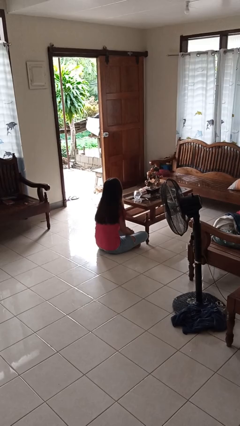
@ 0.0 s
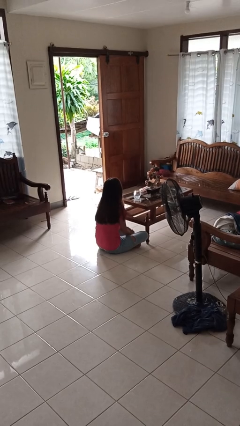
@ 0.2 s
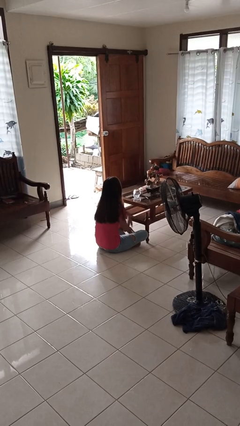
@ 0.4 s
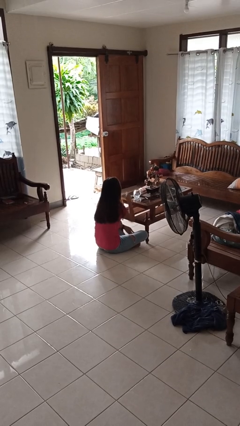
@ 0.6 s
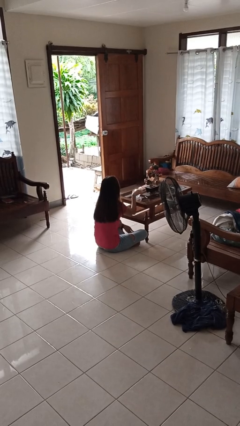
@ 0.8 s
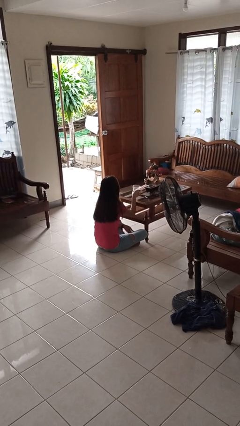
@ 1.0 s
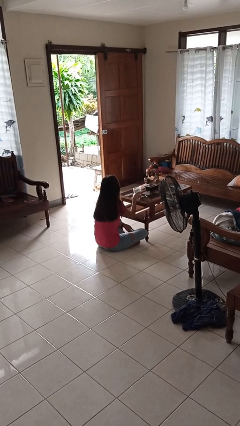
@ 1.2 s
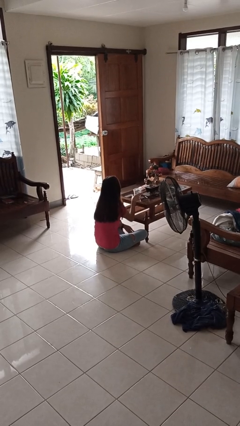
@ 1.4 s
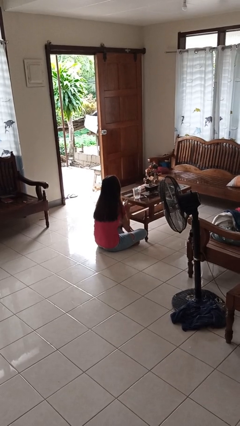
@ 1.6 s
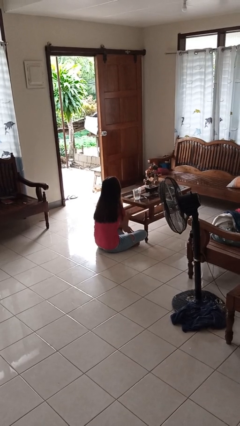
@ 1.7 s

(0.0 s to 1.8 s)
person sets upright glass

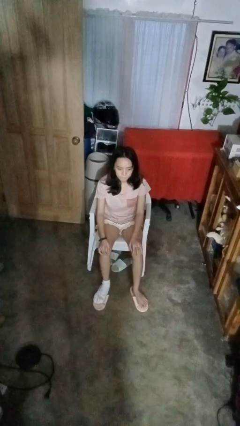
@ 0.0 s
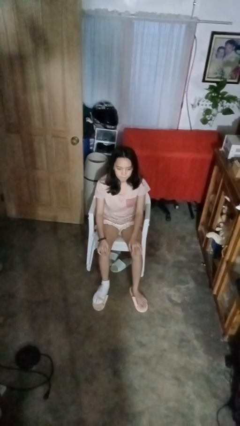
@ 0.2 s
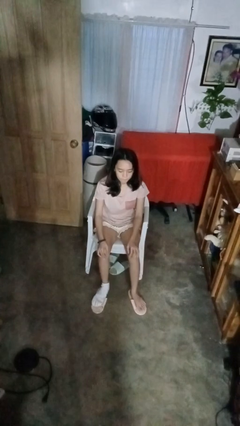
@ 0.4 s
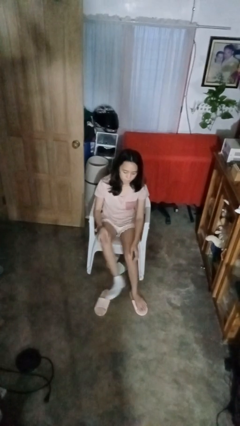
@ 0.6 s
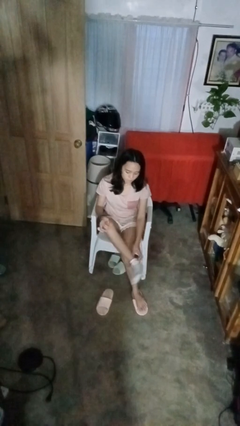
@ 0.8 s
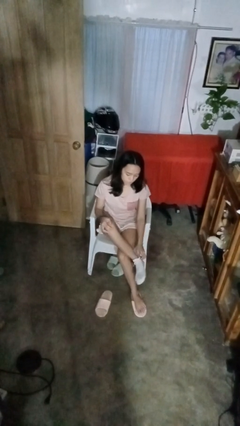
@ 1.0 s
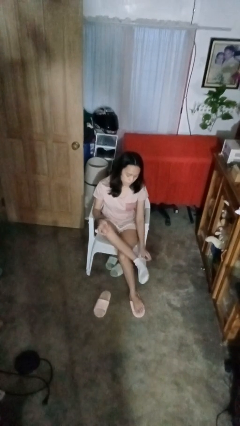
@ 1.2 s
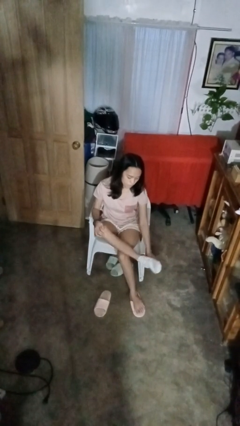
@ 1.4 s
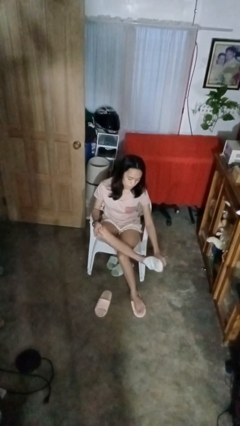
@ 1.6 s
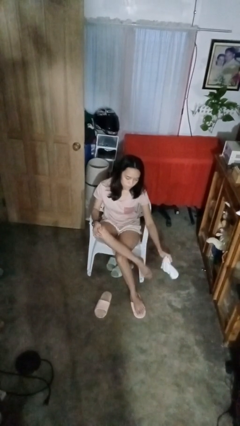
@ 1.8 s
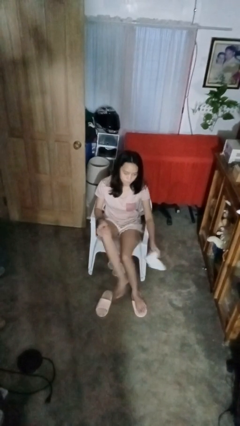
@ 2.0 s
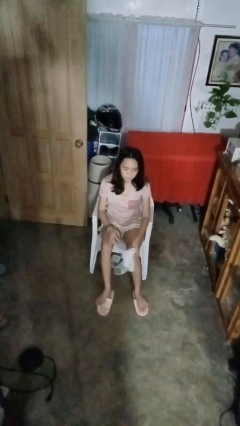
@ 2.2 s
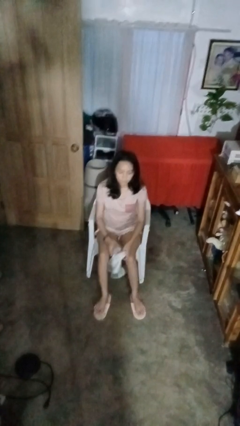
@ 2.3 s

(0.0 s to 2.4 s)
person takes off socks

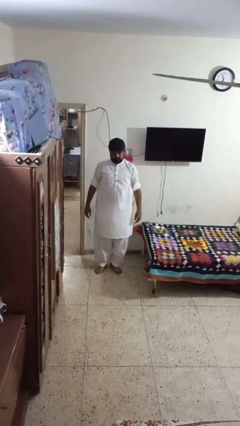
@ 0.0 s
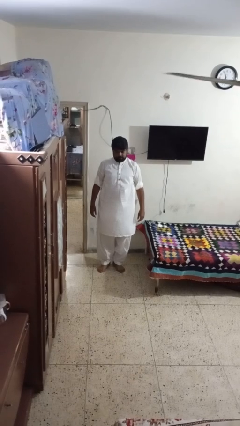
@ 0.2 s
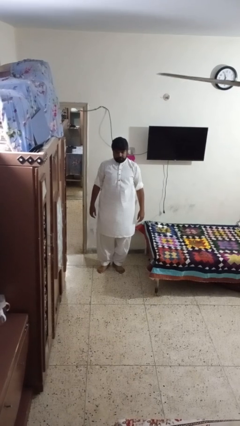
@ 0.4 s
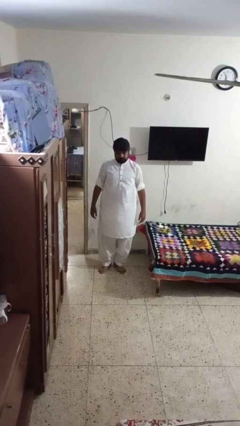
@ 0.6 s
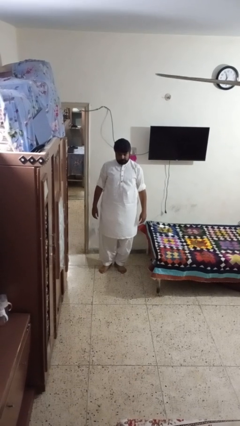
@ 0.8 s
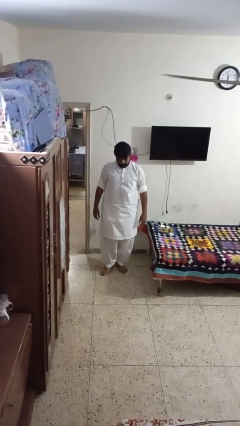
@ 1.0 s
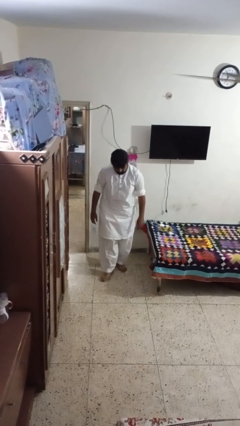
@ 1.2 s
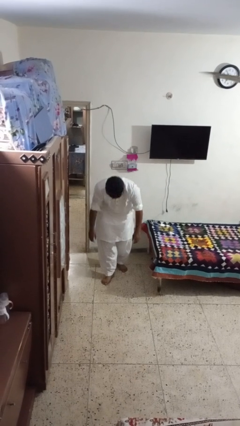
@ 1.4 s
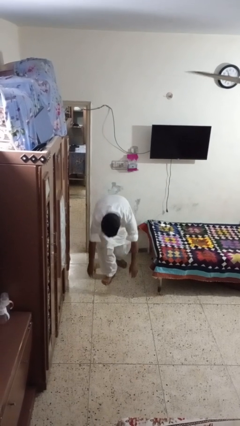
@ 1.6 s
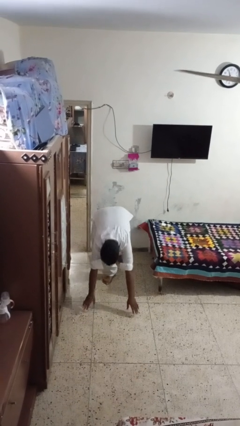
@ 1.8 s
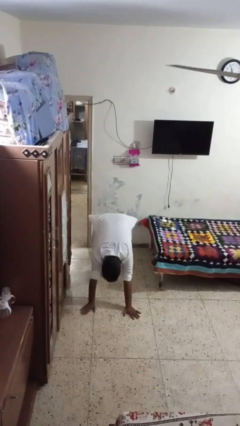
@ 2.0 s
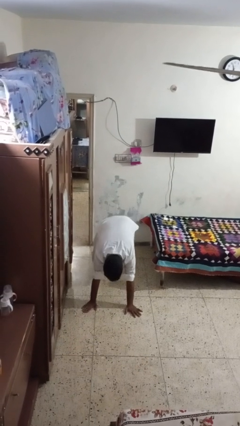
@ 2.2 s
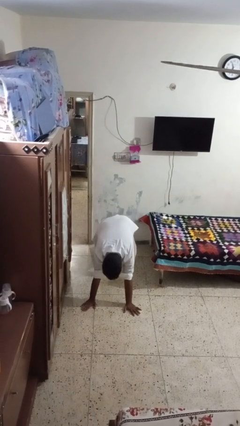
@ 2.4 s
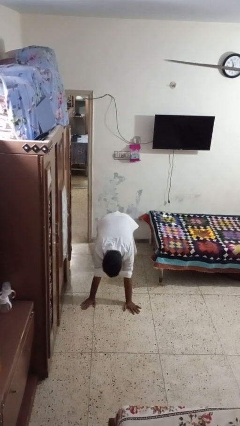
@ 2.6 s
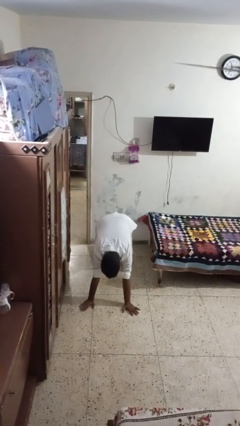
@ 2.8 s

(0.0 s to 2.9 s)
person exercises with plank

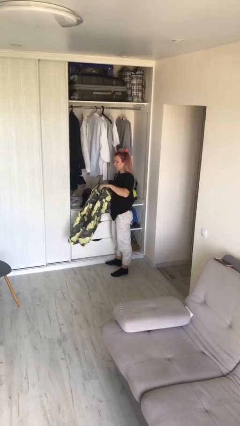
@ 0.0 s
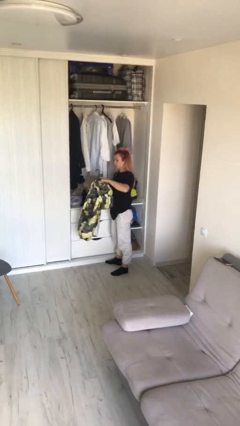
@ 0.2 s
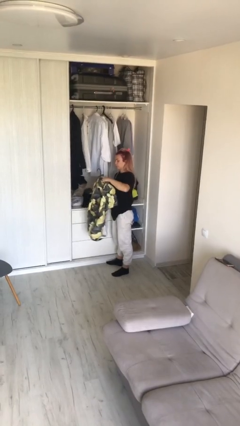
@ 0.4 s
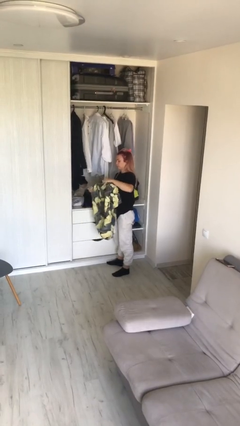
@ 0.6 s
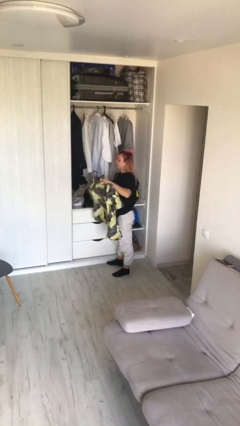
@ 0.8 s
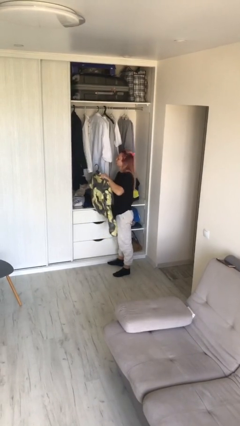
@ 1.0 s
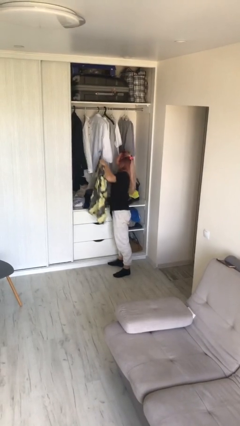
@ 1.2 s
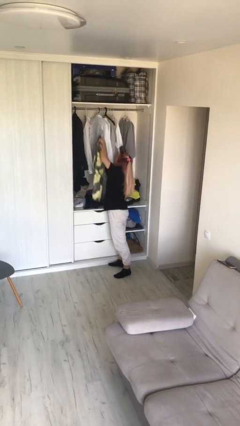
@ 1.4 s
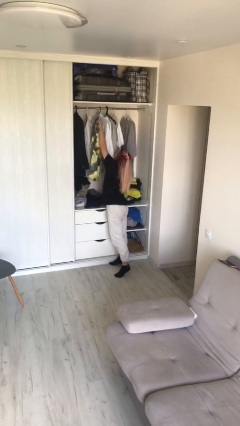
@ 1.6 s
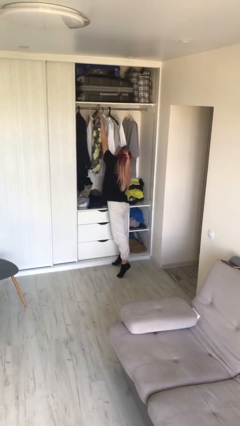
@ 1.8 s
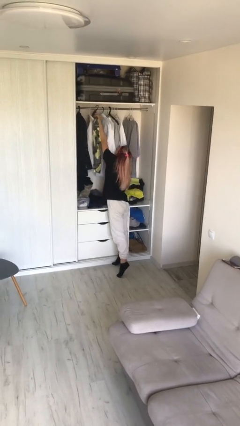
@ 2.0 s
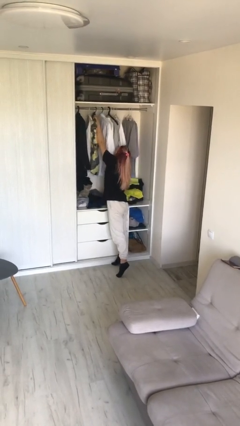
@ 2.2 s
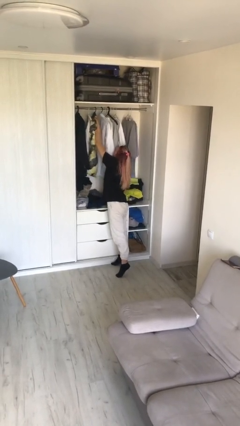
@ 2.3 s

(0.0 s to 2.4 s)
person puts clothes into closet

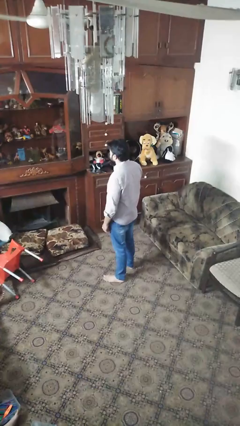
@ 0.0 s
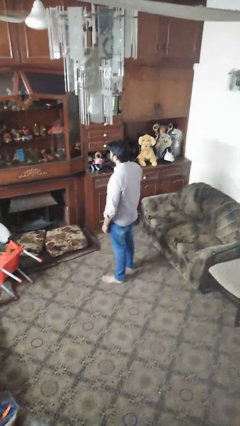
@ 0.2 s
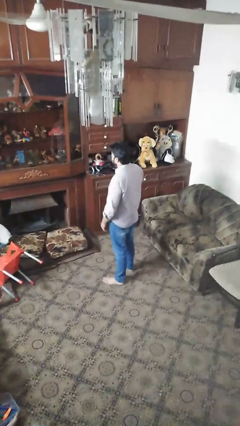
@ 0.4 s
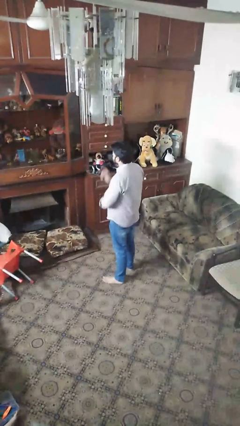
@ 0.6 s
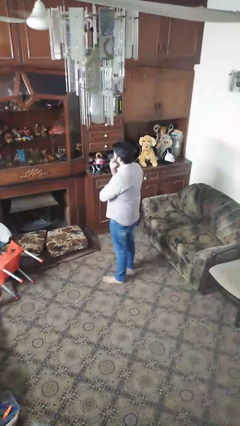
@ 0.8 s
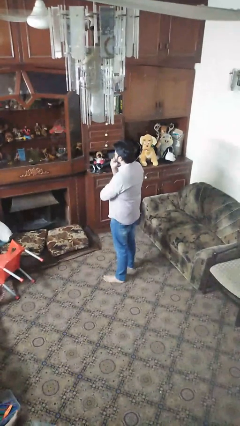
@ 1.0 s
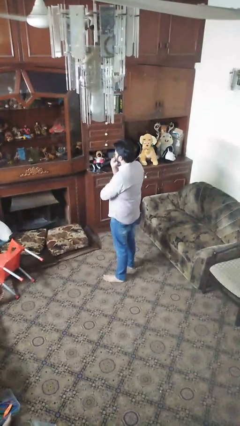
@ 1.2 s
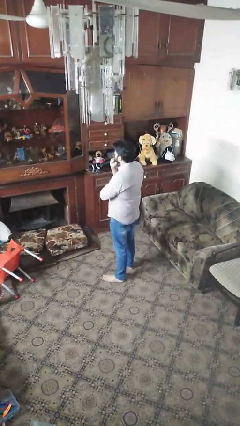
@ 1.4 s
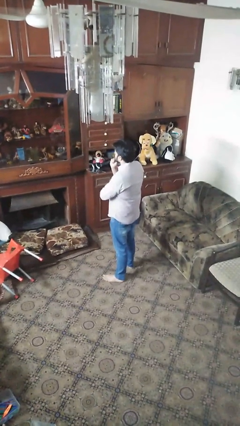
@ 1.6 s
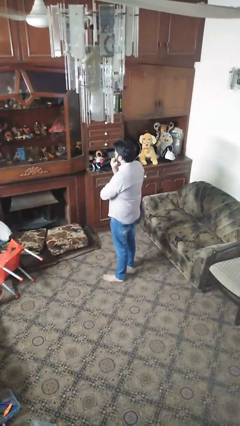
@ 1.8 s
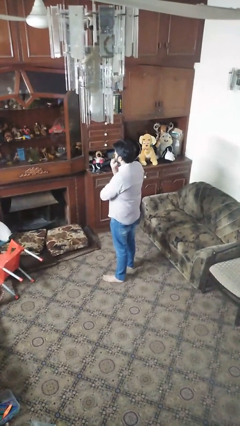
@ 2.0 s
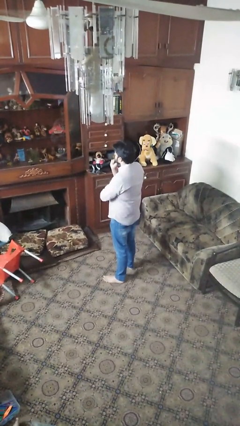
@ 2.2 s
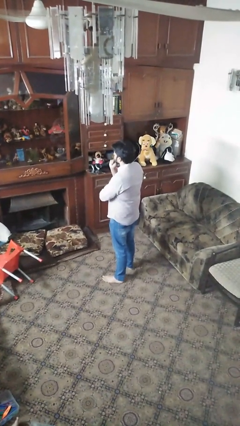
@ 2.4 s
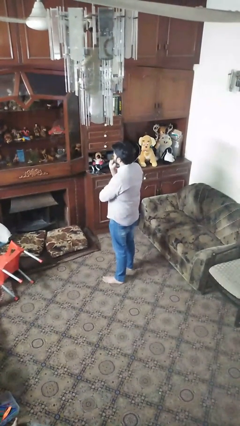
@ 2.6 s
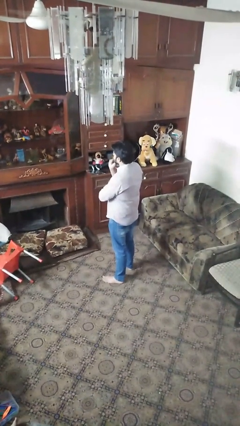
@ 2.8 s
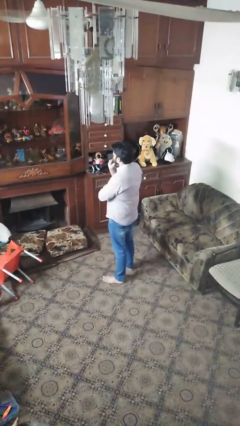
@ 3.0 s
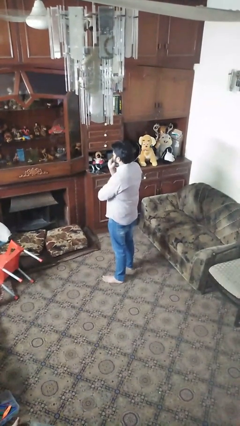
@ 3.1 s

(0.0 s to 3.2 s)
person strokes chin

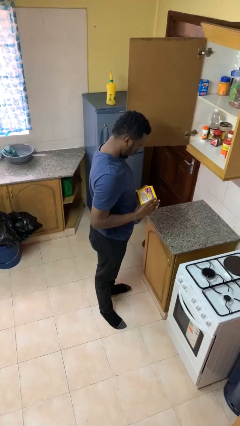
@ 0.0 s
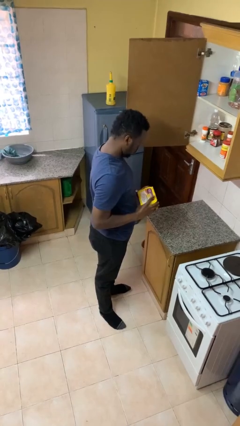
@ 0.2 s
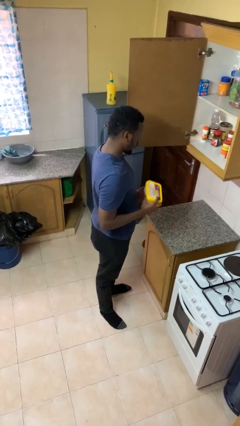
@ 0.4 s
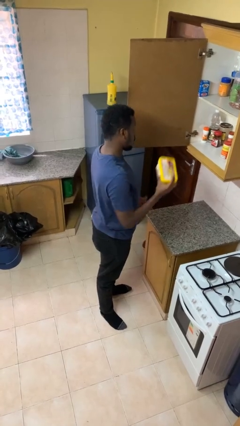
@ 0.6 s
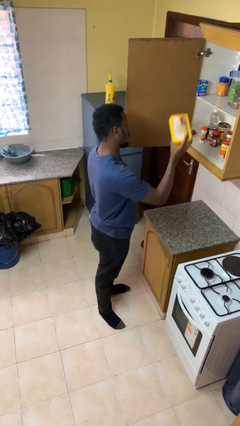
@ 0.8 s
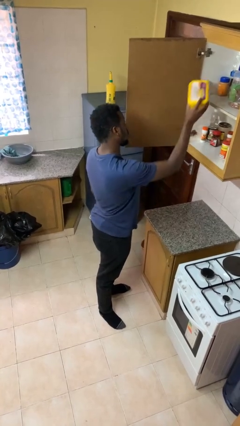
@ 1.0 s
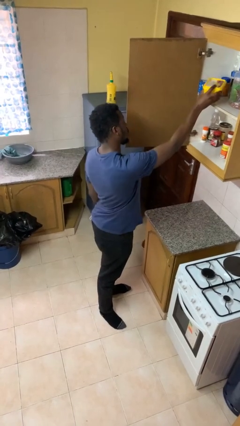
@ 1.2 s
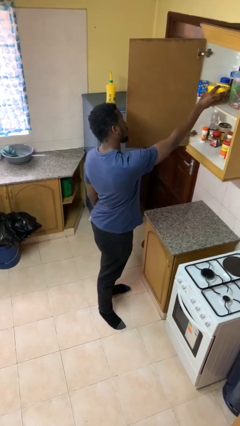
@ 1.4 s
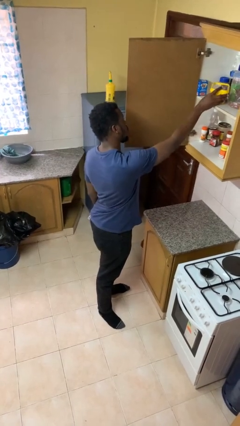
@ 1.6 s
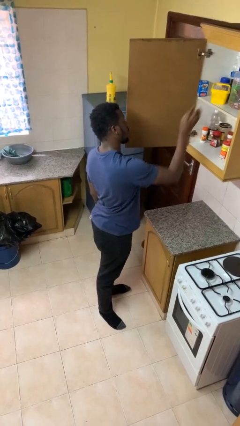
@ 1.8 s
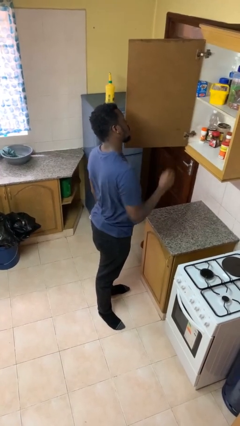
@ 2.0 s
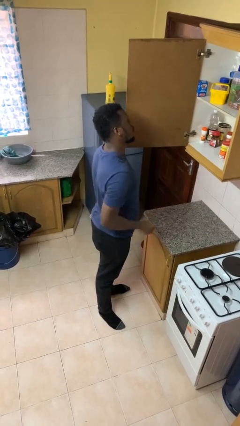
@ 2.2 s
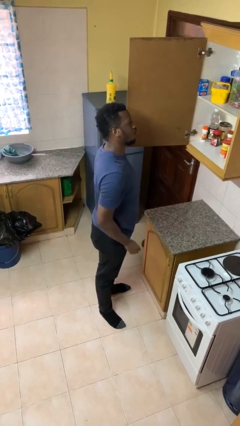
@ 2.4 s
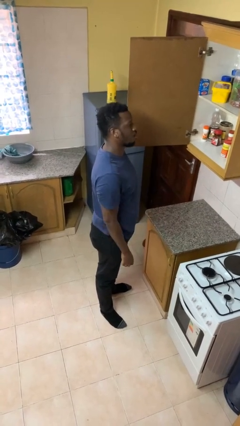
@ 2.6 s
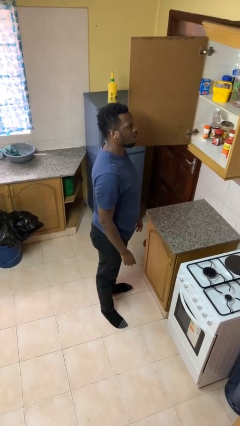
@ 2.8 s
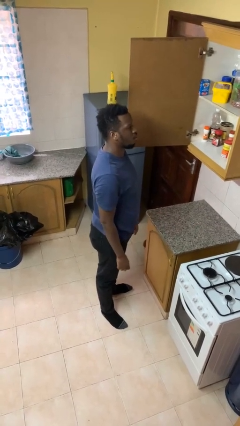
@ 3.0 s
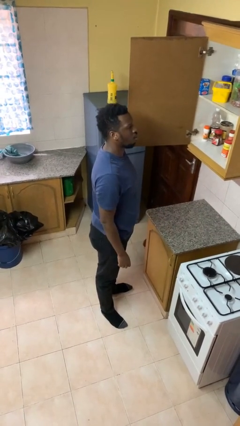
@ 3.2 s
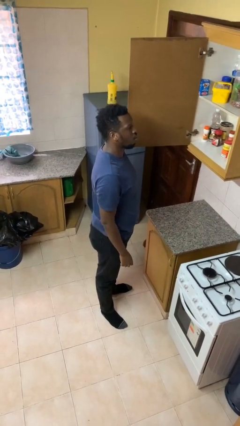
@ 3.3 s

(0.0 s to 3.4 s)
person puts down object on shelf

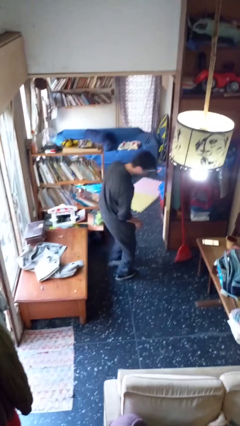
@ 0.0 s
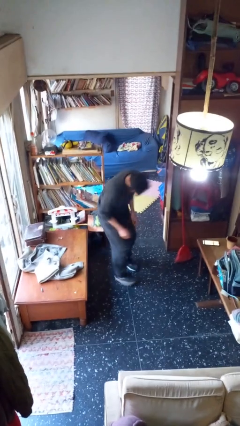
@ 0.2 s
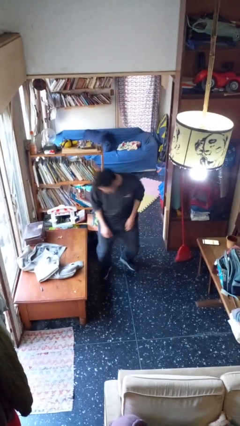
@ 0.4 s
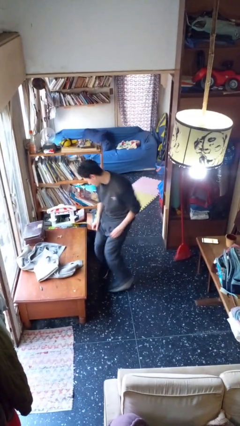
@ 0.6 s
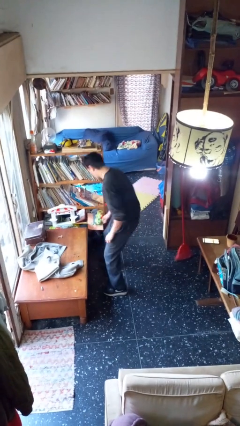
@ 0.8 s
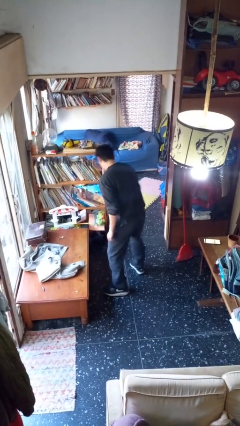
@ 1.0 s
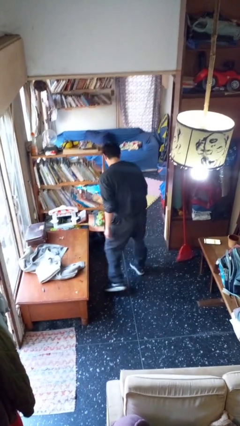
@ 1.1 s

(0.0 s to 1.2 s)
person twirls
